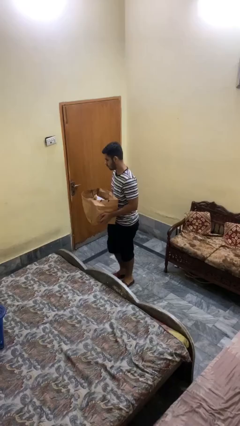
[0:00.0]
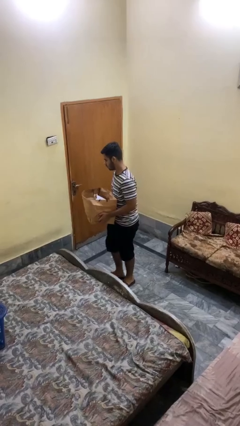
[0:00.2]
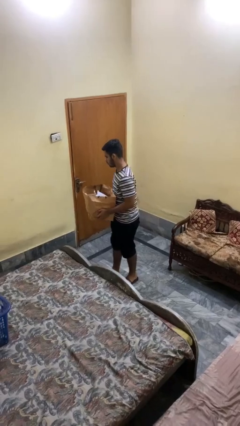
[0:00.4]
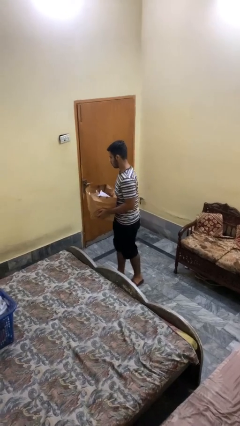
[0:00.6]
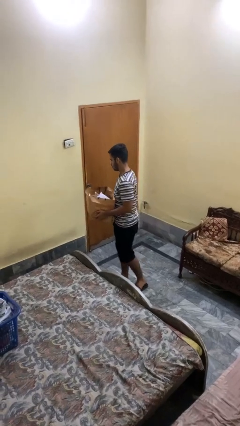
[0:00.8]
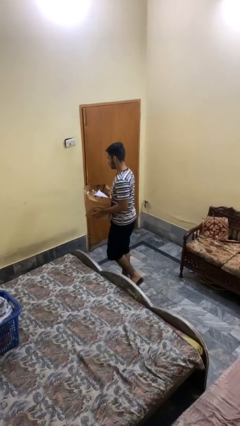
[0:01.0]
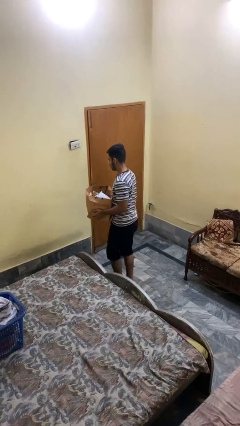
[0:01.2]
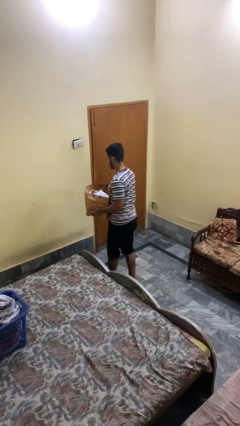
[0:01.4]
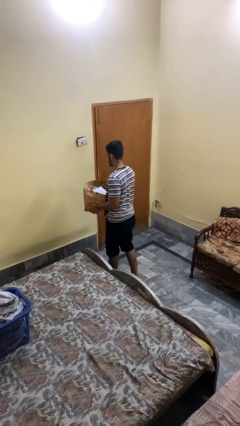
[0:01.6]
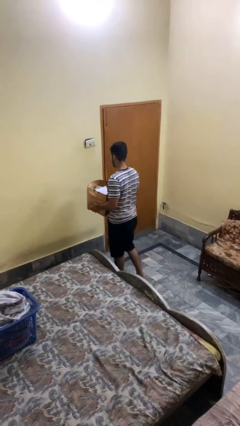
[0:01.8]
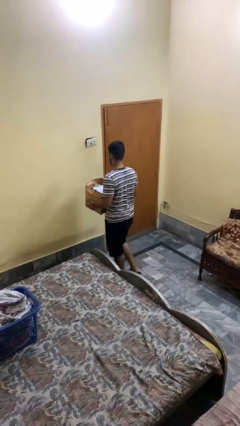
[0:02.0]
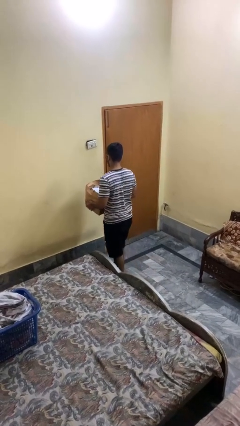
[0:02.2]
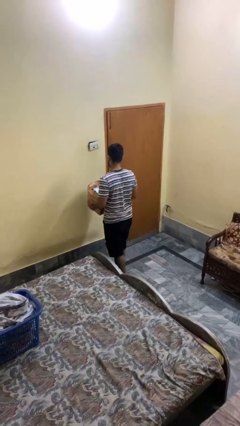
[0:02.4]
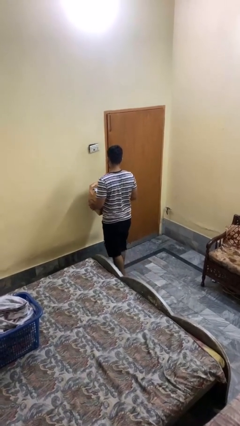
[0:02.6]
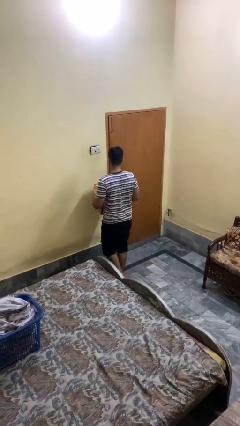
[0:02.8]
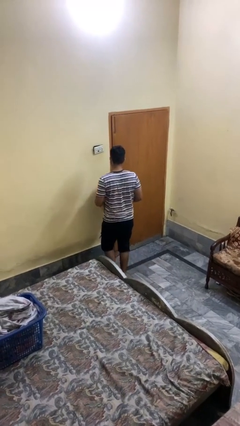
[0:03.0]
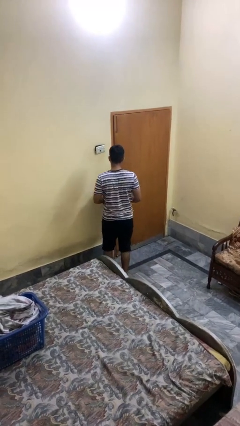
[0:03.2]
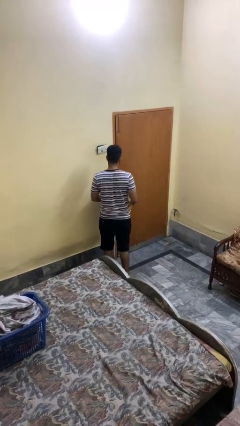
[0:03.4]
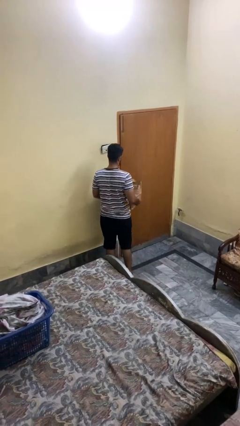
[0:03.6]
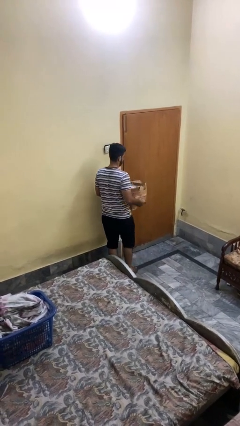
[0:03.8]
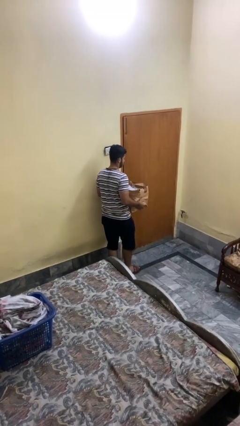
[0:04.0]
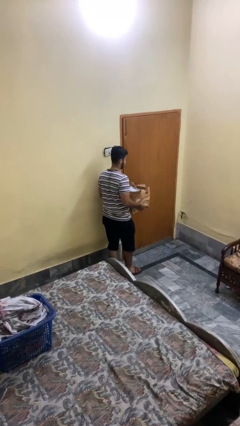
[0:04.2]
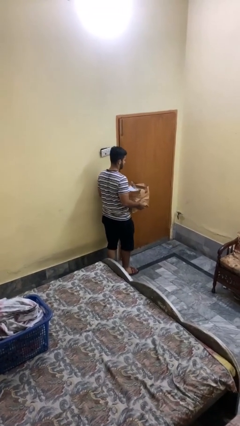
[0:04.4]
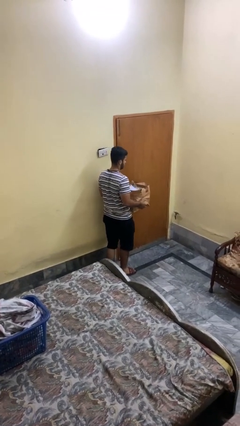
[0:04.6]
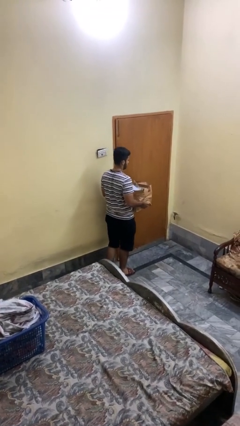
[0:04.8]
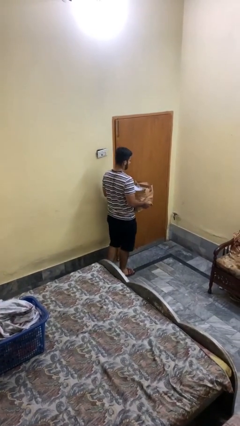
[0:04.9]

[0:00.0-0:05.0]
person carries groceries

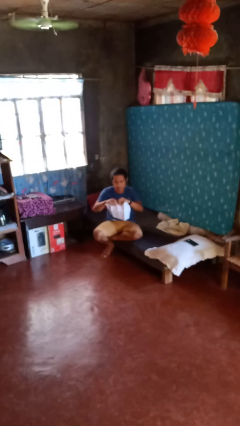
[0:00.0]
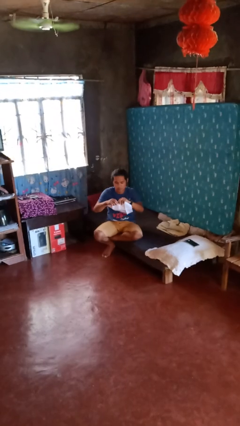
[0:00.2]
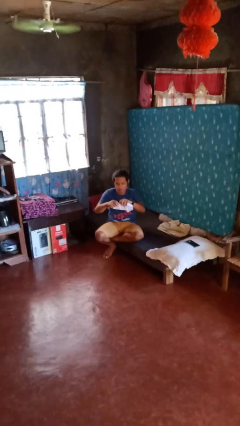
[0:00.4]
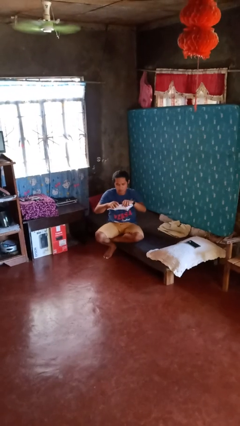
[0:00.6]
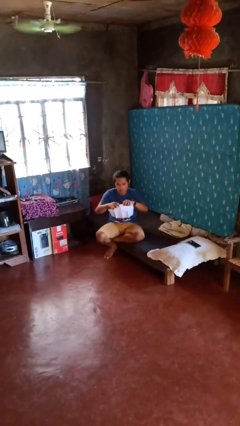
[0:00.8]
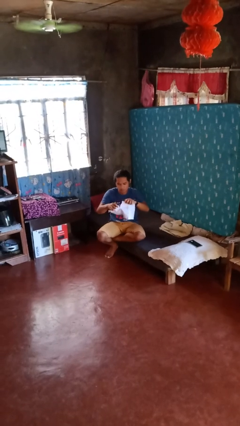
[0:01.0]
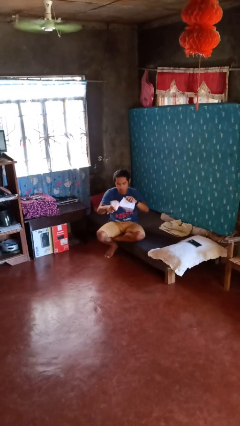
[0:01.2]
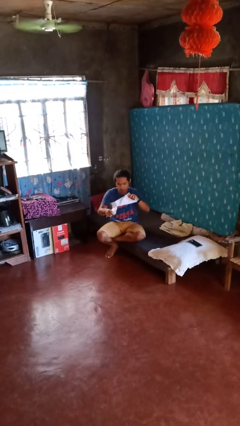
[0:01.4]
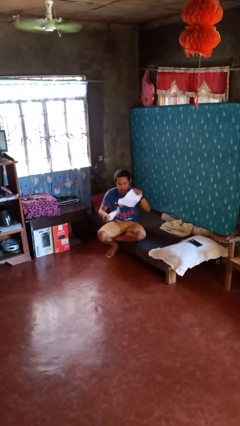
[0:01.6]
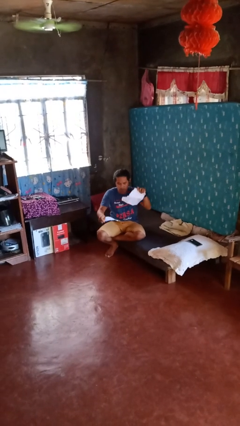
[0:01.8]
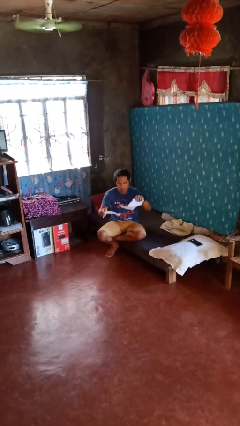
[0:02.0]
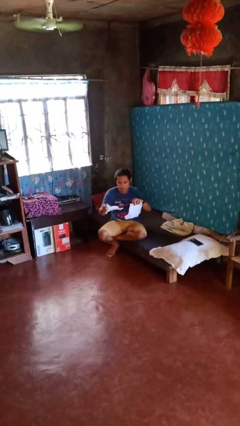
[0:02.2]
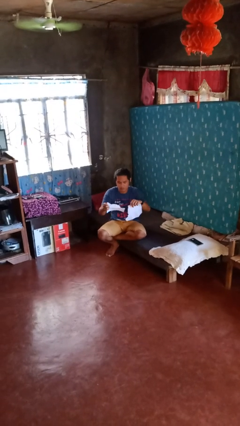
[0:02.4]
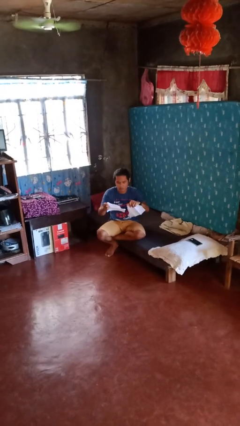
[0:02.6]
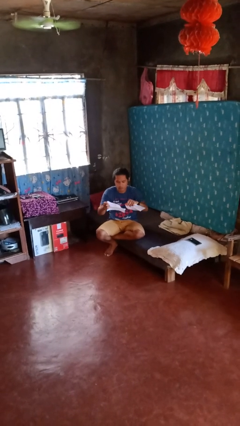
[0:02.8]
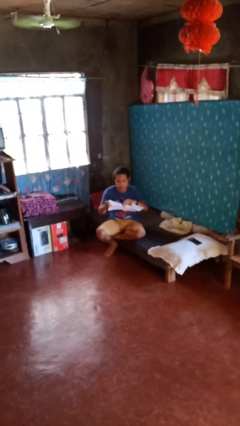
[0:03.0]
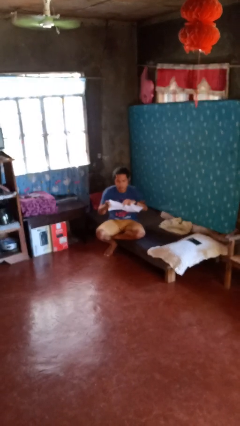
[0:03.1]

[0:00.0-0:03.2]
person tears paper

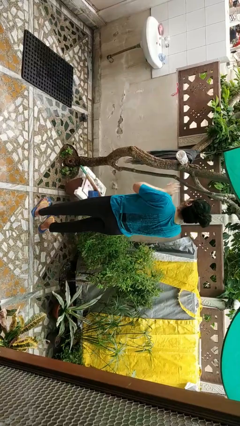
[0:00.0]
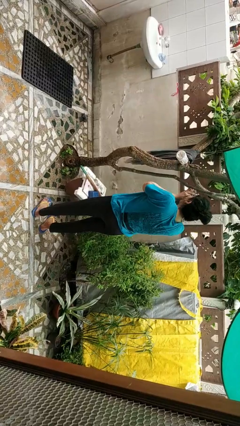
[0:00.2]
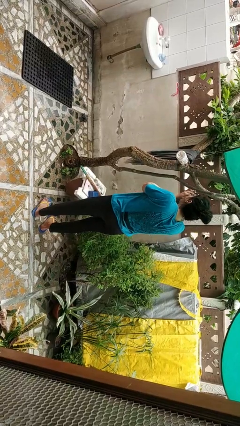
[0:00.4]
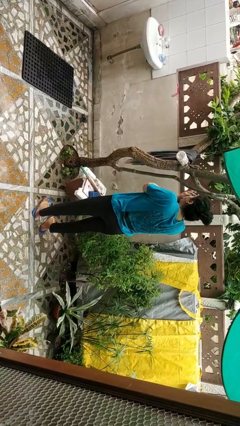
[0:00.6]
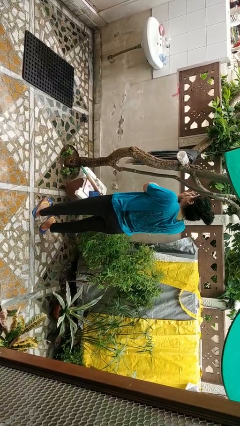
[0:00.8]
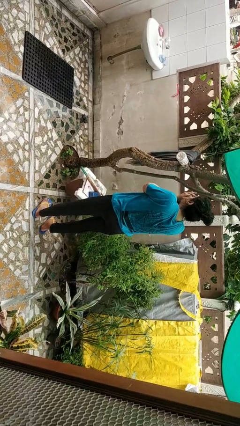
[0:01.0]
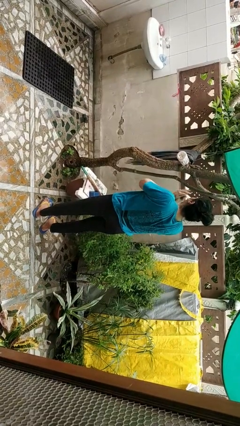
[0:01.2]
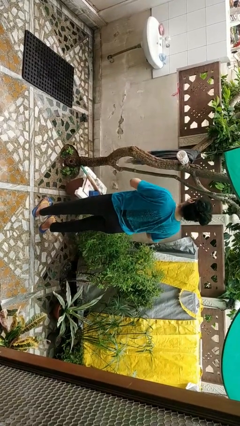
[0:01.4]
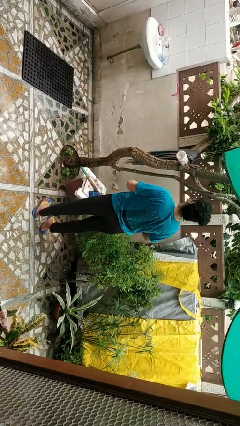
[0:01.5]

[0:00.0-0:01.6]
person blows into hands

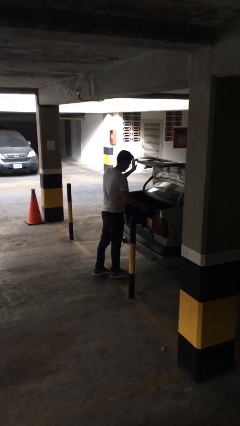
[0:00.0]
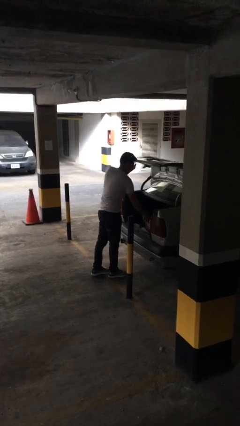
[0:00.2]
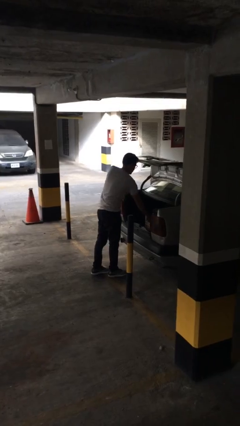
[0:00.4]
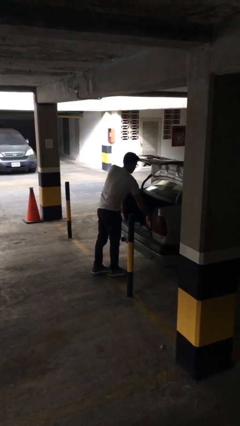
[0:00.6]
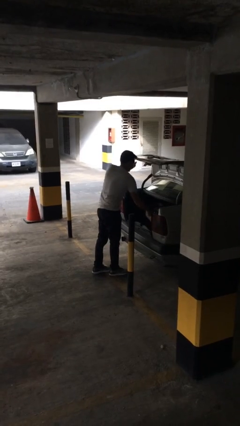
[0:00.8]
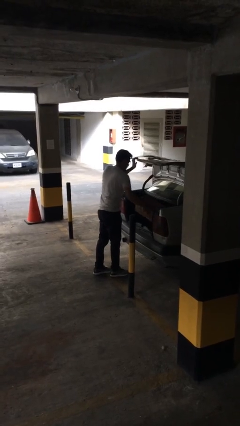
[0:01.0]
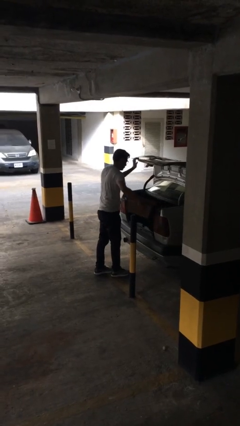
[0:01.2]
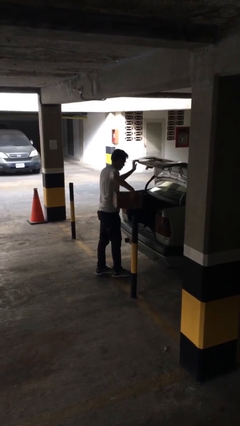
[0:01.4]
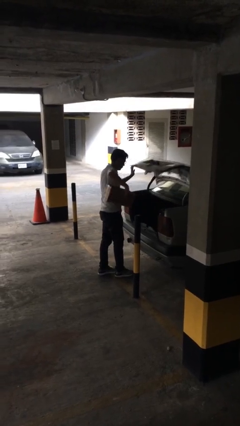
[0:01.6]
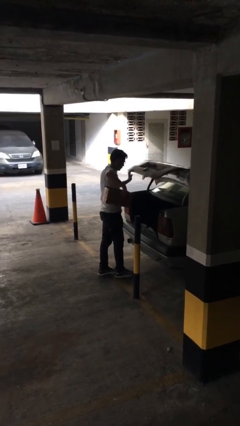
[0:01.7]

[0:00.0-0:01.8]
person unloads car

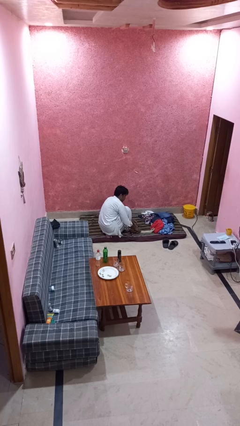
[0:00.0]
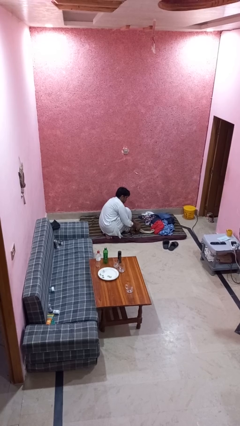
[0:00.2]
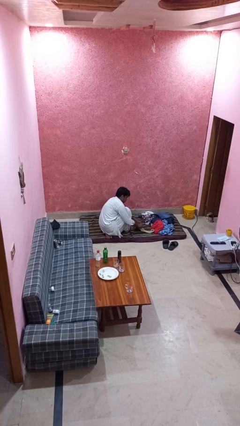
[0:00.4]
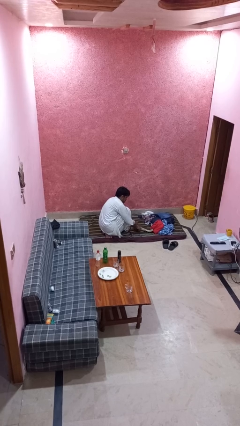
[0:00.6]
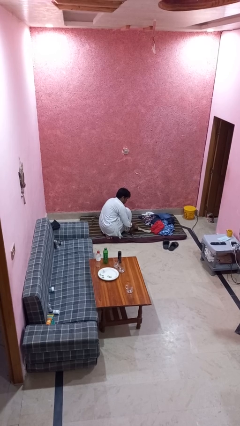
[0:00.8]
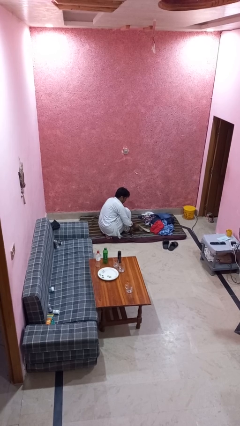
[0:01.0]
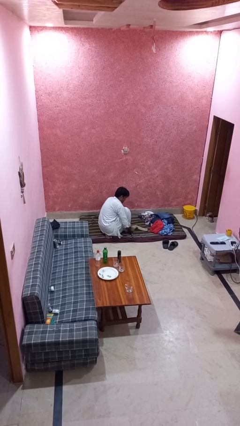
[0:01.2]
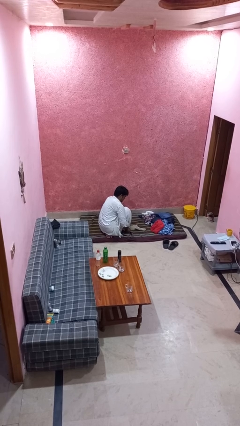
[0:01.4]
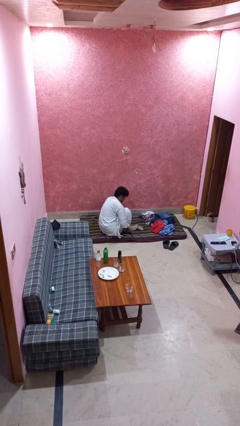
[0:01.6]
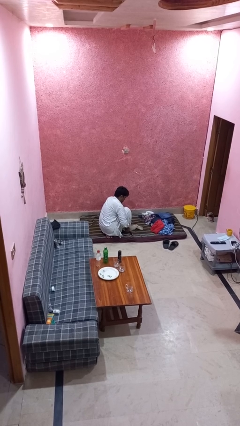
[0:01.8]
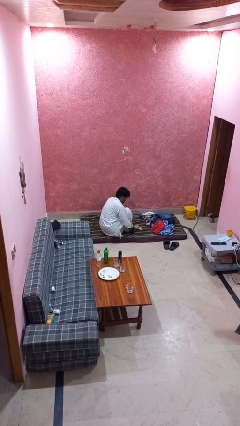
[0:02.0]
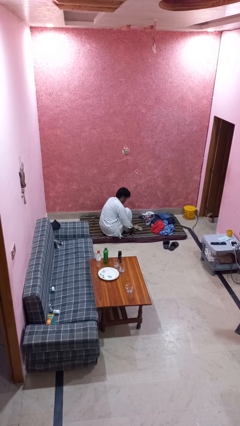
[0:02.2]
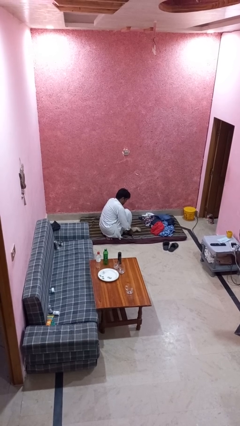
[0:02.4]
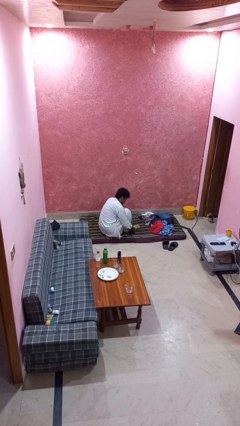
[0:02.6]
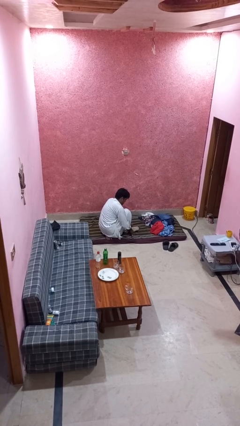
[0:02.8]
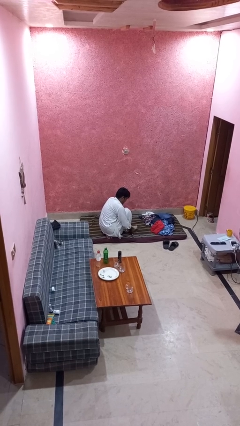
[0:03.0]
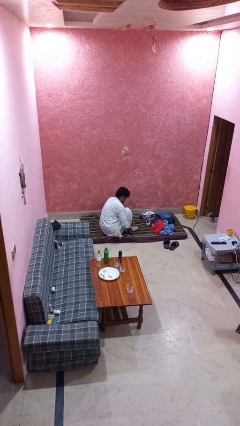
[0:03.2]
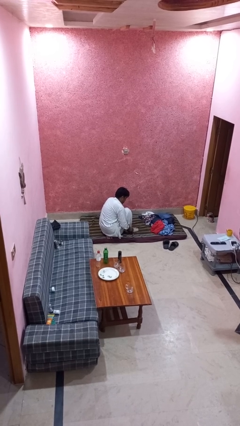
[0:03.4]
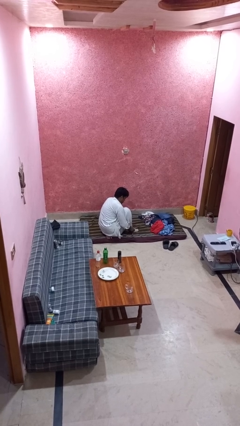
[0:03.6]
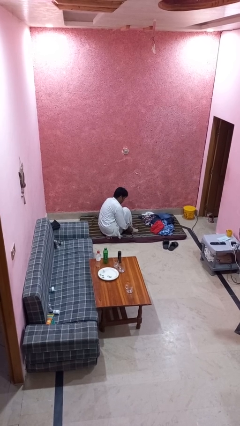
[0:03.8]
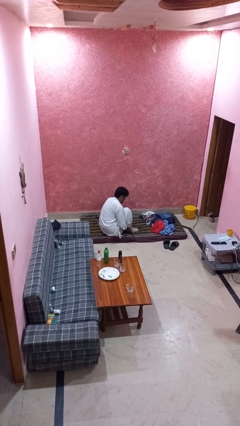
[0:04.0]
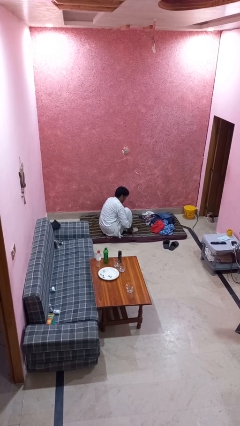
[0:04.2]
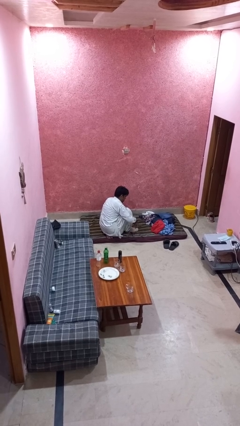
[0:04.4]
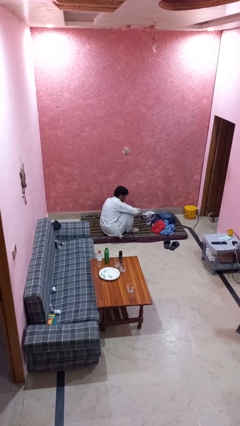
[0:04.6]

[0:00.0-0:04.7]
person puts on socks

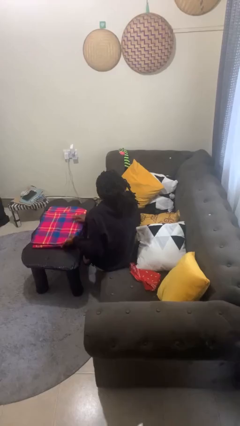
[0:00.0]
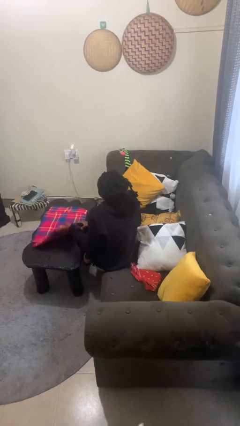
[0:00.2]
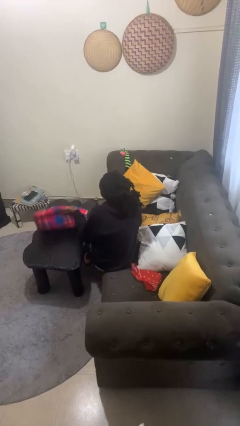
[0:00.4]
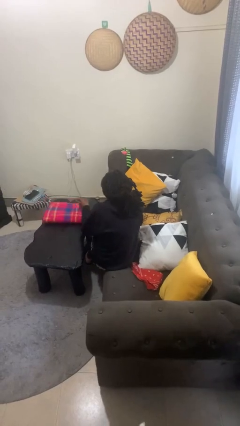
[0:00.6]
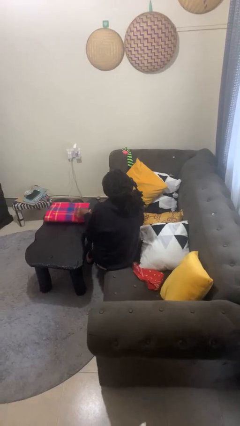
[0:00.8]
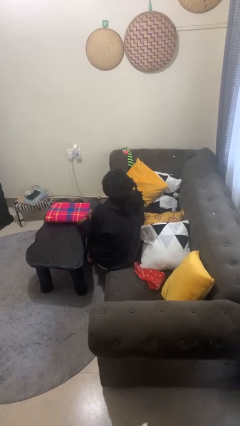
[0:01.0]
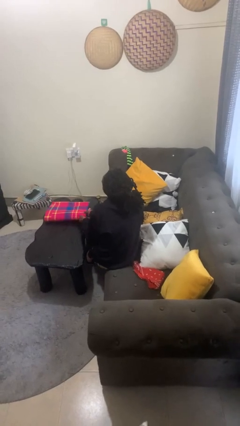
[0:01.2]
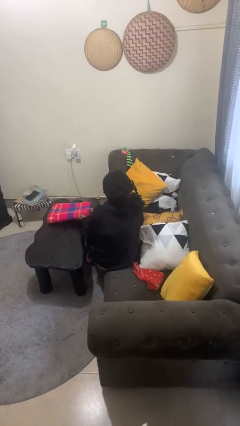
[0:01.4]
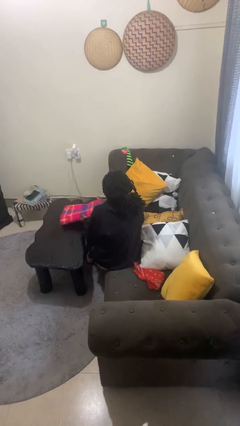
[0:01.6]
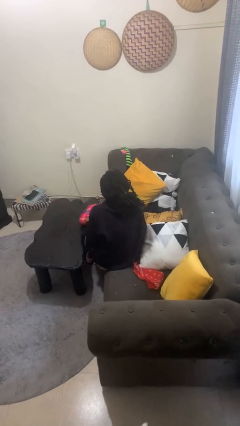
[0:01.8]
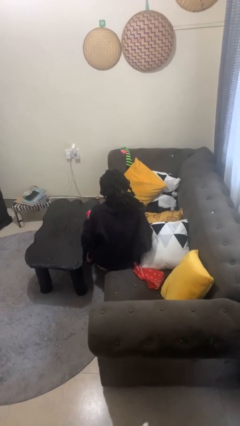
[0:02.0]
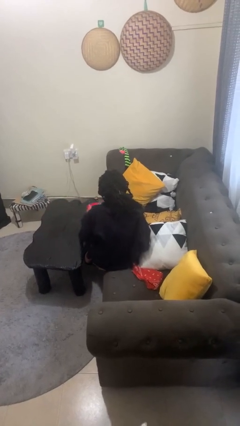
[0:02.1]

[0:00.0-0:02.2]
person folds tablecloth
